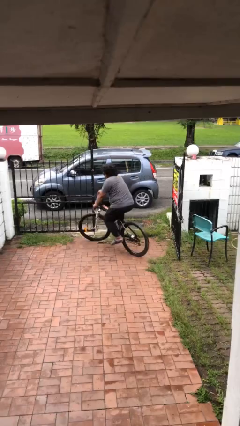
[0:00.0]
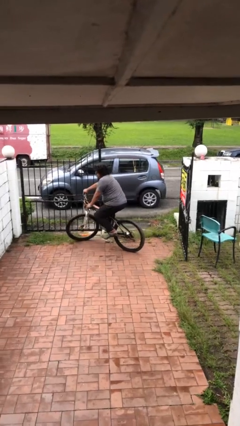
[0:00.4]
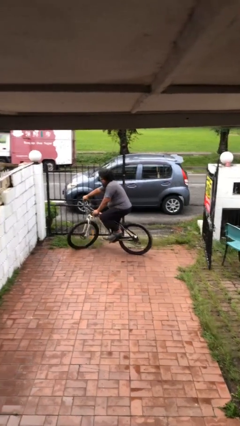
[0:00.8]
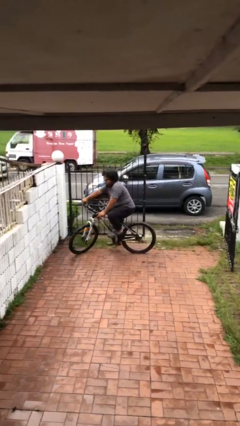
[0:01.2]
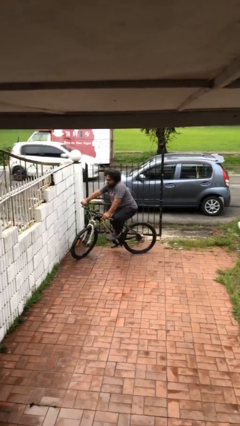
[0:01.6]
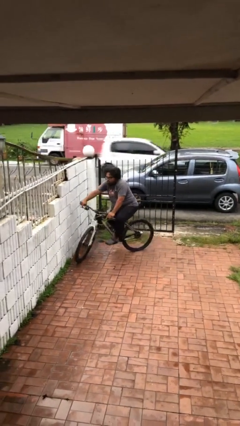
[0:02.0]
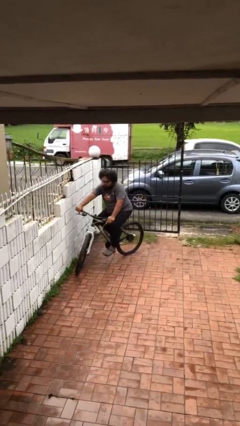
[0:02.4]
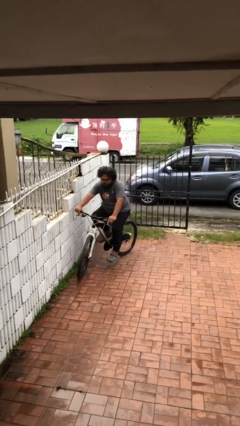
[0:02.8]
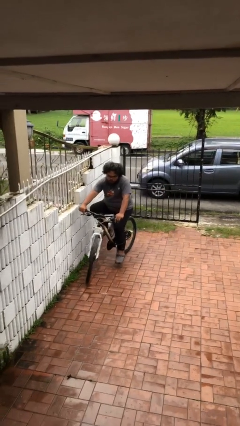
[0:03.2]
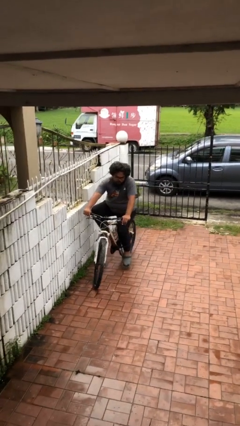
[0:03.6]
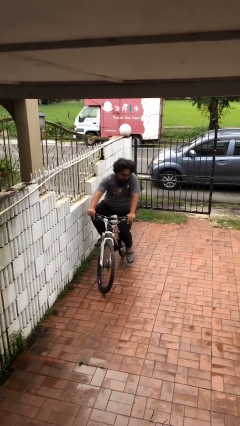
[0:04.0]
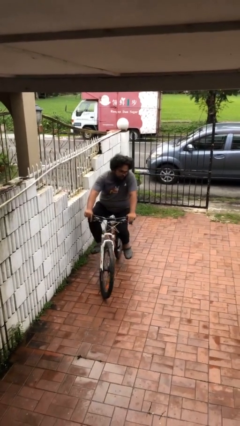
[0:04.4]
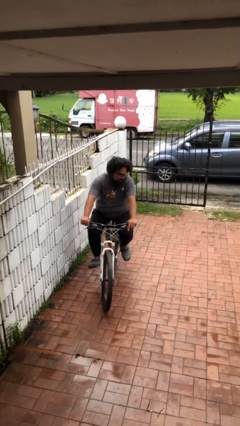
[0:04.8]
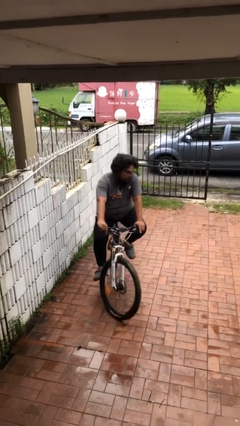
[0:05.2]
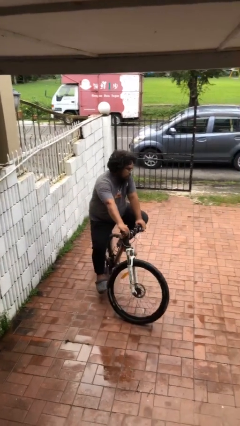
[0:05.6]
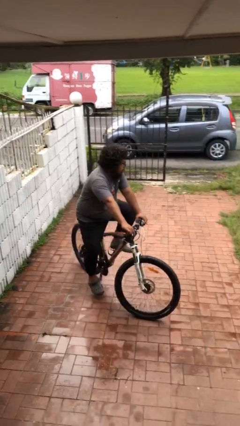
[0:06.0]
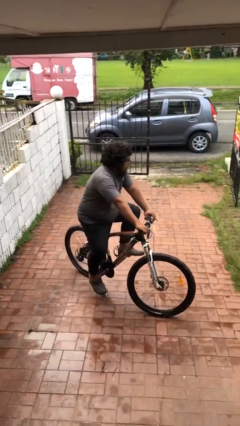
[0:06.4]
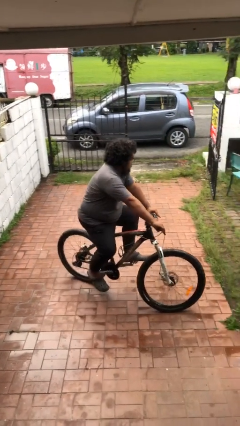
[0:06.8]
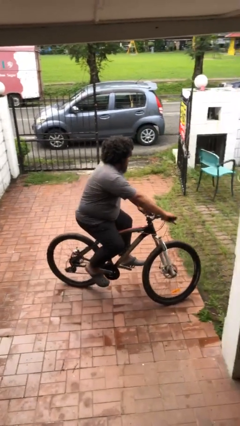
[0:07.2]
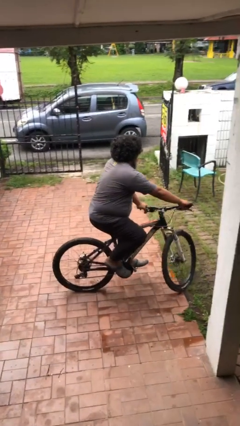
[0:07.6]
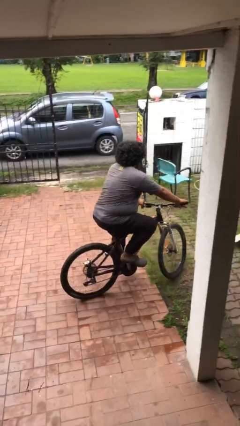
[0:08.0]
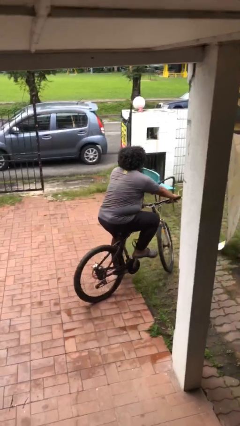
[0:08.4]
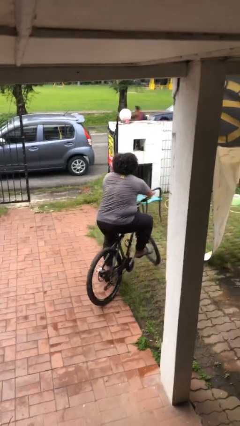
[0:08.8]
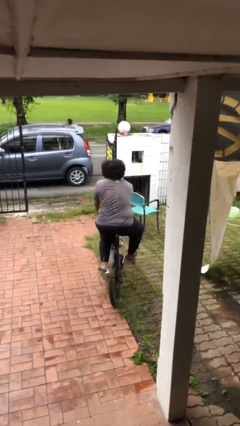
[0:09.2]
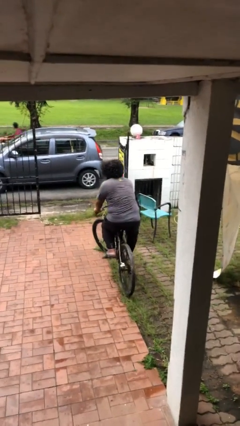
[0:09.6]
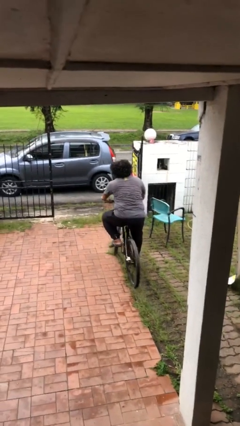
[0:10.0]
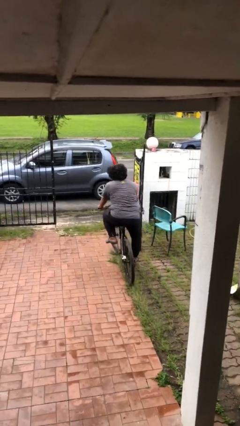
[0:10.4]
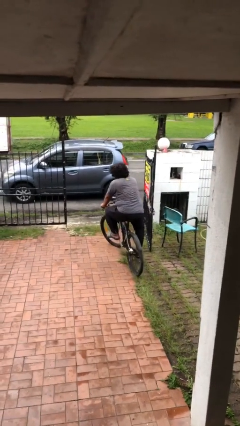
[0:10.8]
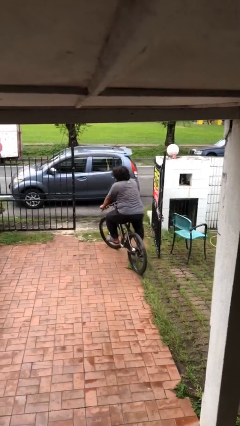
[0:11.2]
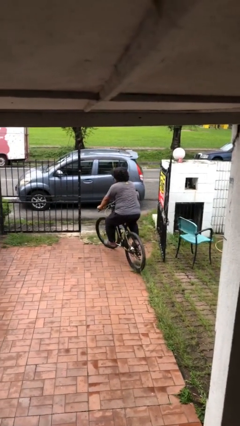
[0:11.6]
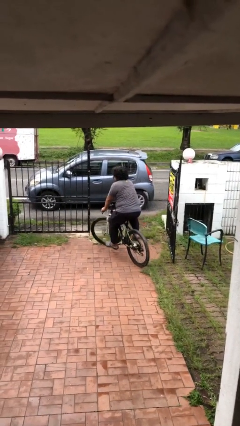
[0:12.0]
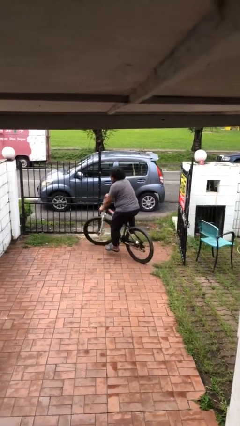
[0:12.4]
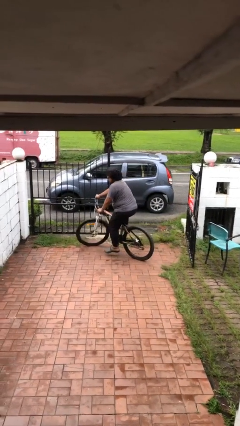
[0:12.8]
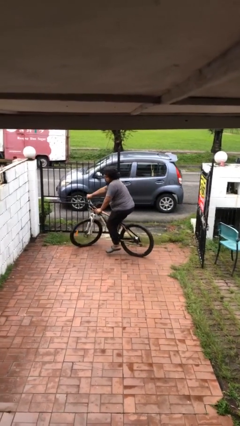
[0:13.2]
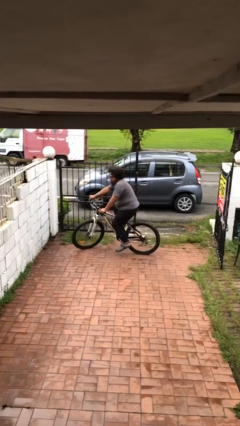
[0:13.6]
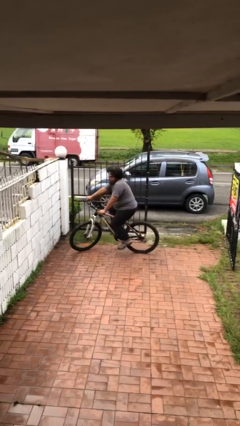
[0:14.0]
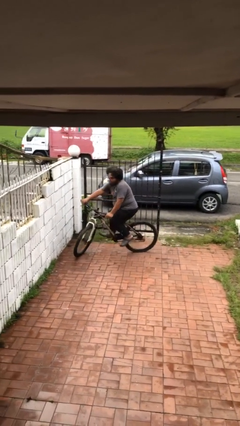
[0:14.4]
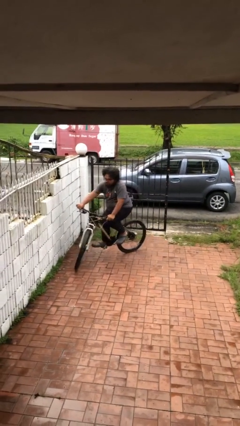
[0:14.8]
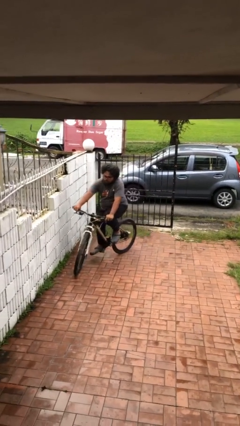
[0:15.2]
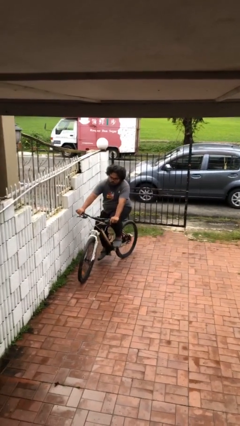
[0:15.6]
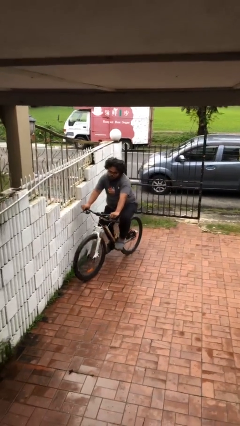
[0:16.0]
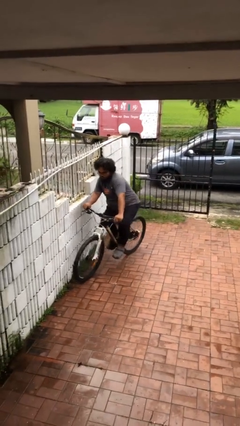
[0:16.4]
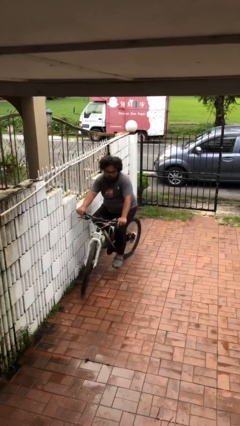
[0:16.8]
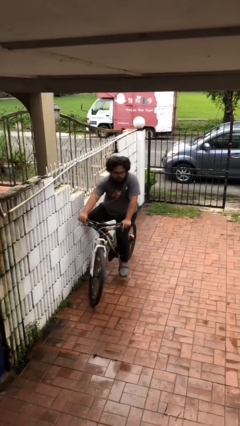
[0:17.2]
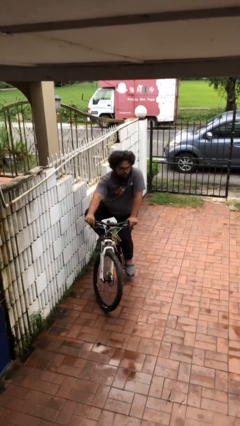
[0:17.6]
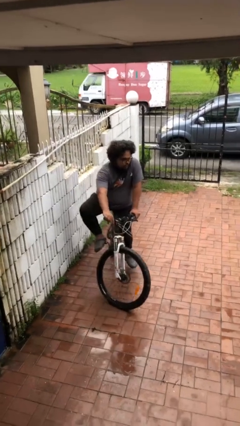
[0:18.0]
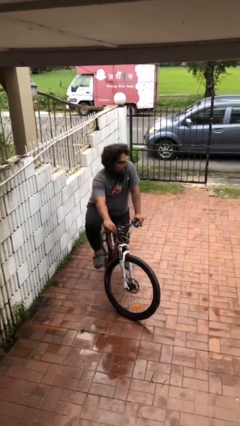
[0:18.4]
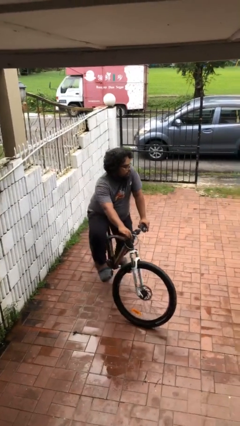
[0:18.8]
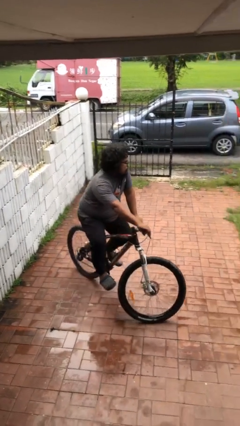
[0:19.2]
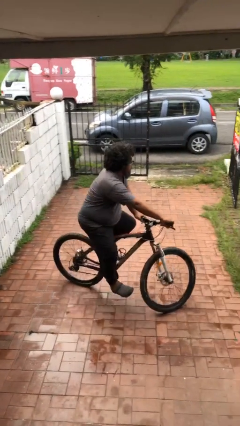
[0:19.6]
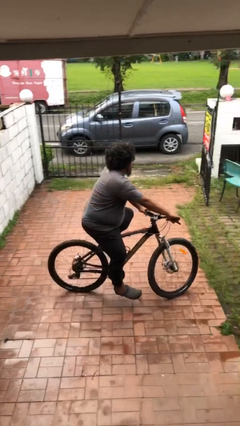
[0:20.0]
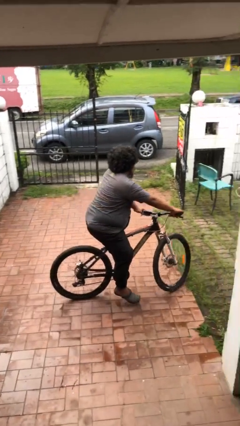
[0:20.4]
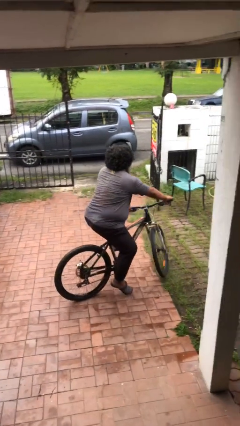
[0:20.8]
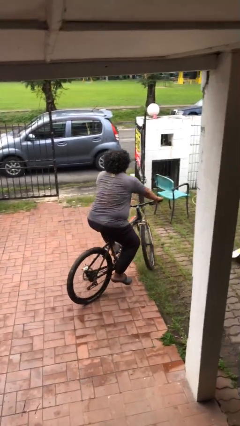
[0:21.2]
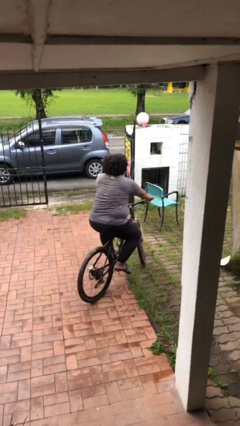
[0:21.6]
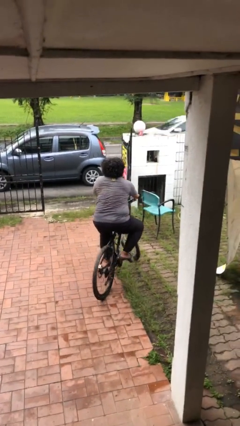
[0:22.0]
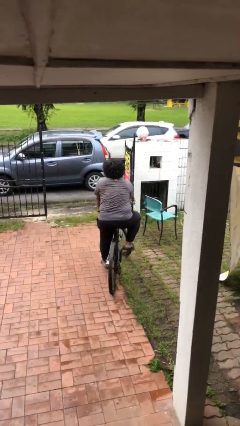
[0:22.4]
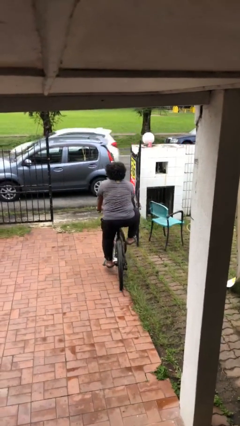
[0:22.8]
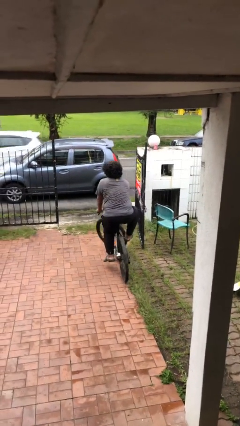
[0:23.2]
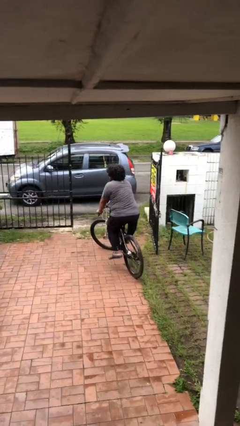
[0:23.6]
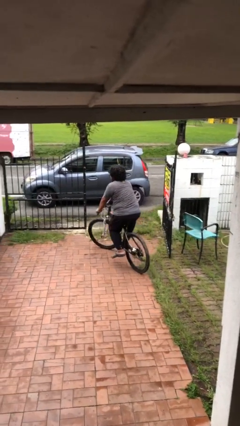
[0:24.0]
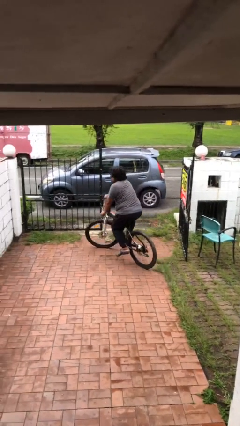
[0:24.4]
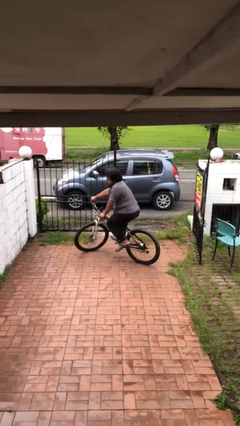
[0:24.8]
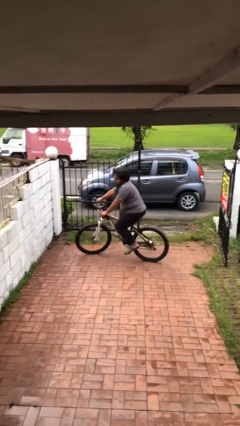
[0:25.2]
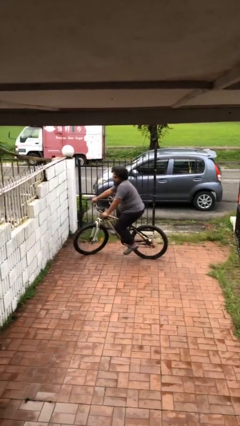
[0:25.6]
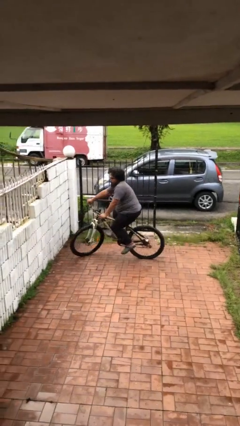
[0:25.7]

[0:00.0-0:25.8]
person rides bicycle

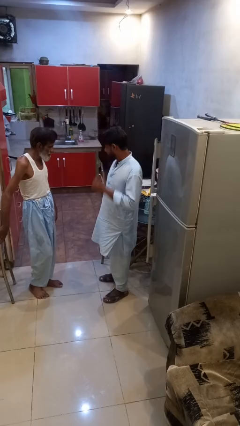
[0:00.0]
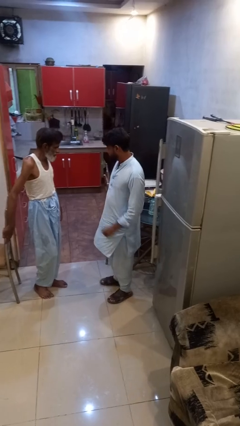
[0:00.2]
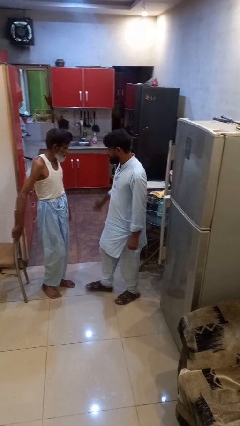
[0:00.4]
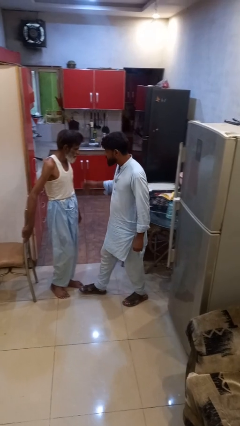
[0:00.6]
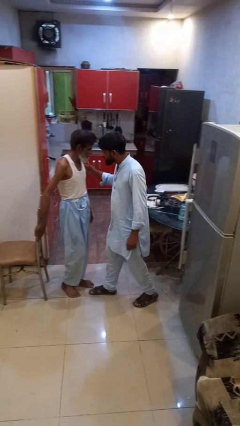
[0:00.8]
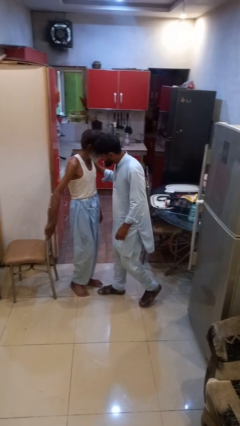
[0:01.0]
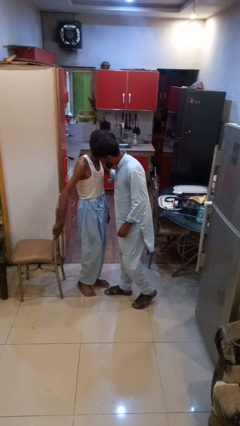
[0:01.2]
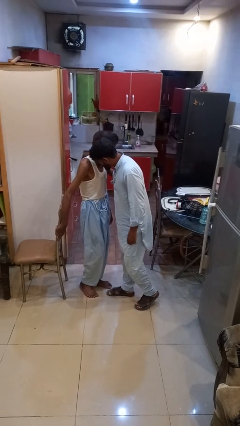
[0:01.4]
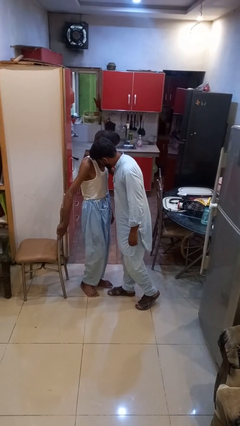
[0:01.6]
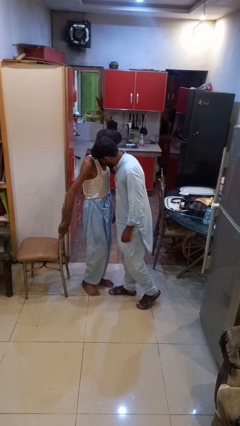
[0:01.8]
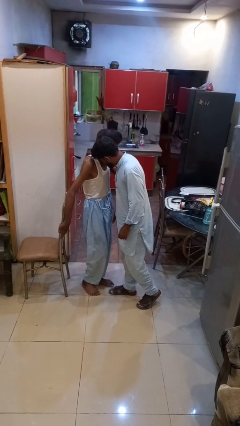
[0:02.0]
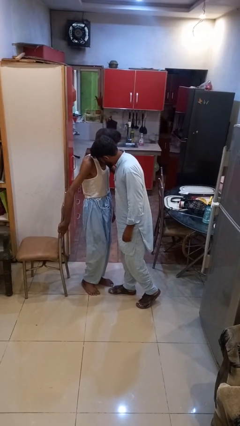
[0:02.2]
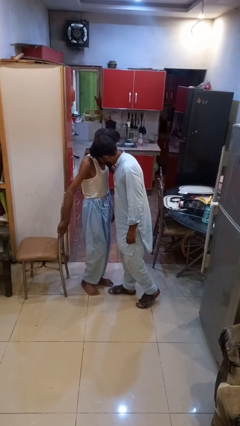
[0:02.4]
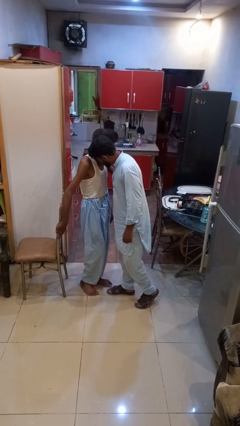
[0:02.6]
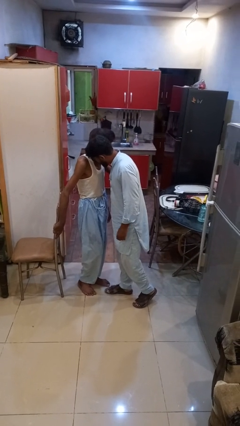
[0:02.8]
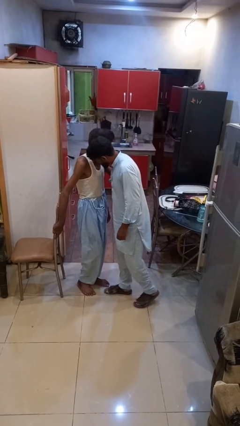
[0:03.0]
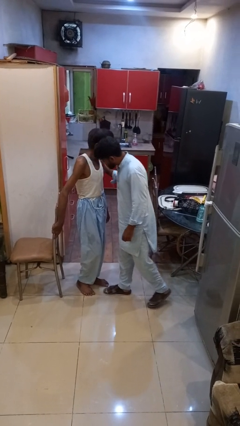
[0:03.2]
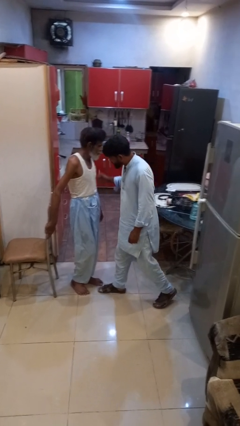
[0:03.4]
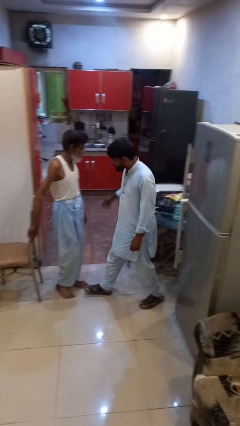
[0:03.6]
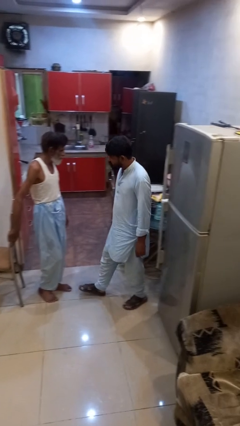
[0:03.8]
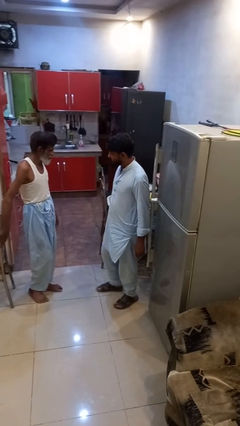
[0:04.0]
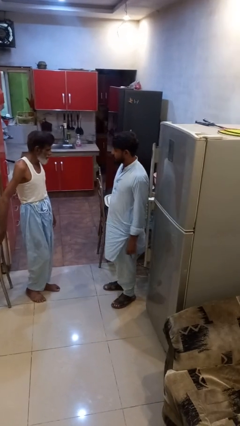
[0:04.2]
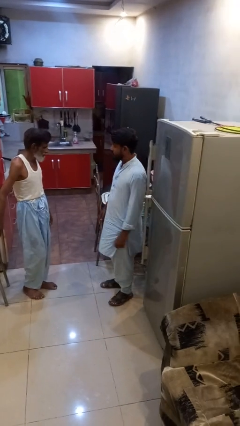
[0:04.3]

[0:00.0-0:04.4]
person kisses cheek of person
